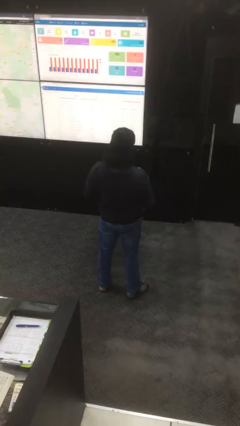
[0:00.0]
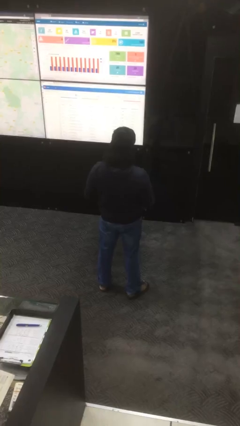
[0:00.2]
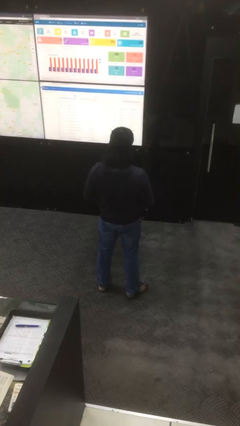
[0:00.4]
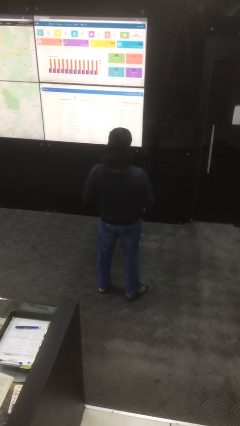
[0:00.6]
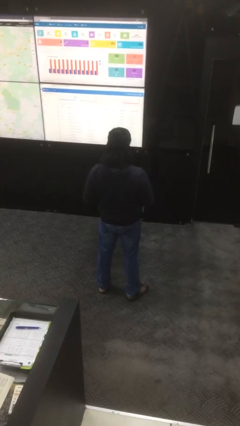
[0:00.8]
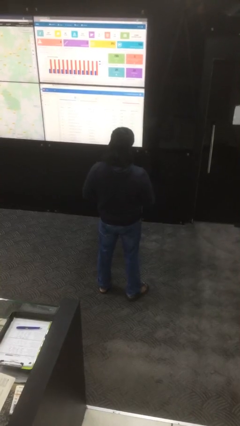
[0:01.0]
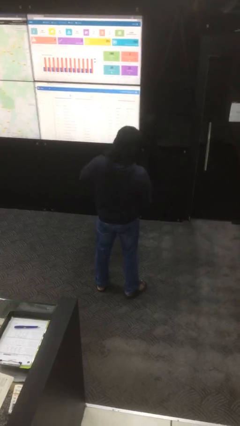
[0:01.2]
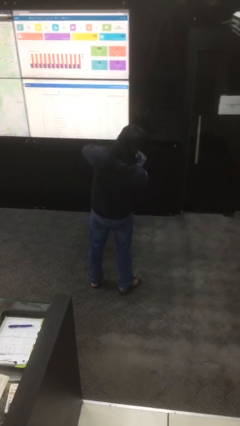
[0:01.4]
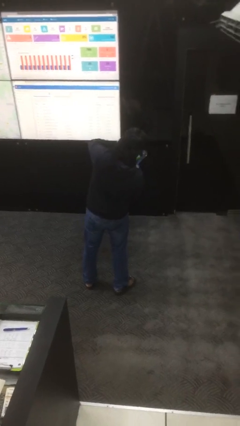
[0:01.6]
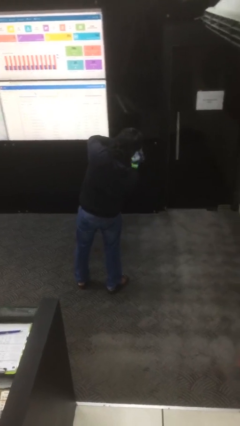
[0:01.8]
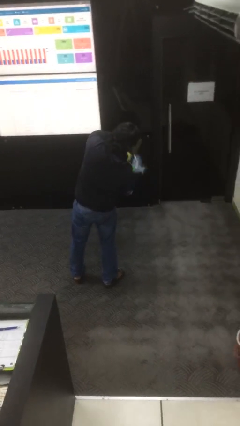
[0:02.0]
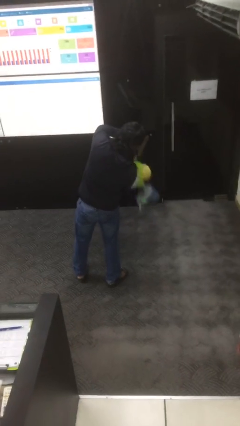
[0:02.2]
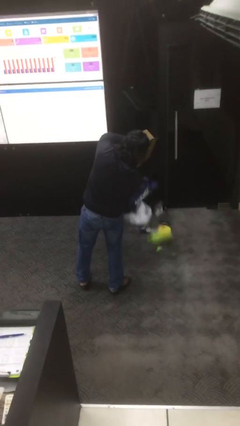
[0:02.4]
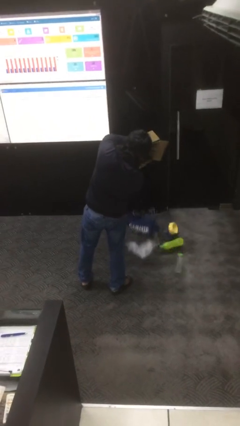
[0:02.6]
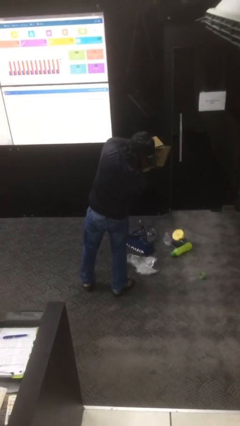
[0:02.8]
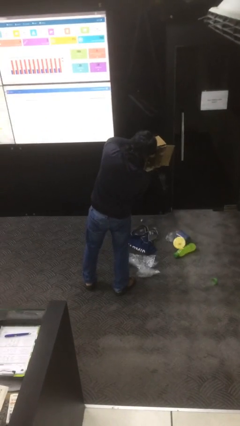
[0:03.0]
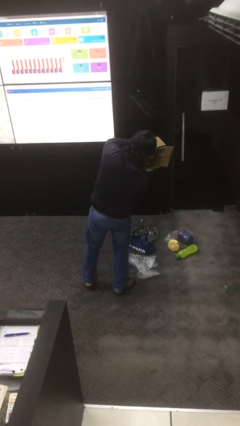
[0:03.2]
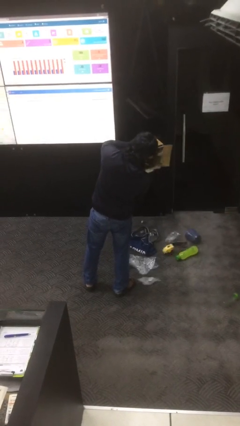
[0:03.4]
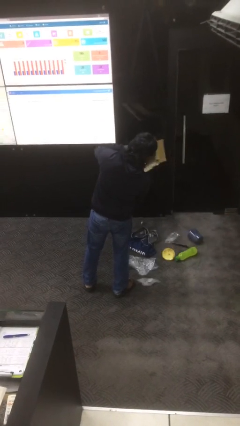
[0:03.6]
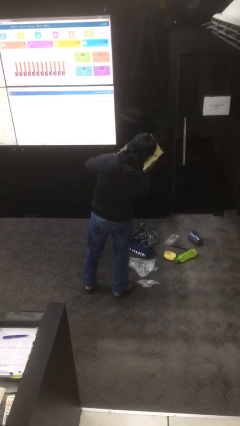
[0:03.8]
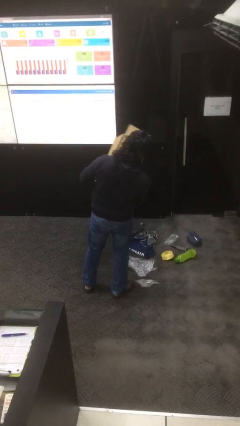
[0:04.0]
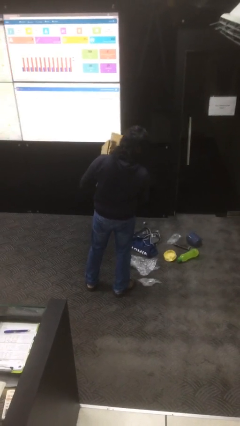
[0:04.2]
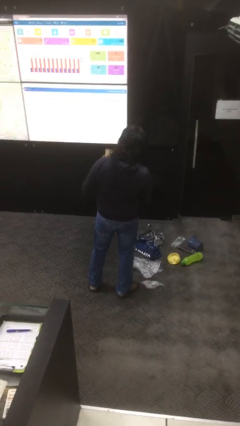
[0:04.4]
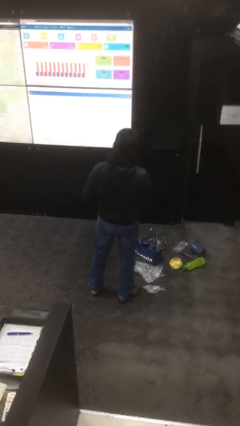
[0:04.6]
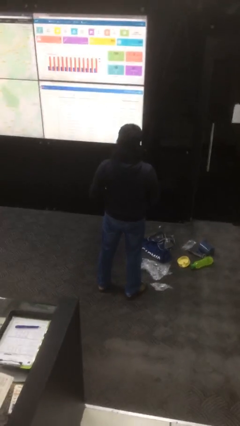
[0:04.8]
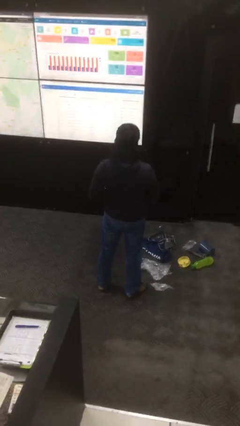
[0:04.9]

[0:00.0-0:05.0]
person unloads box onto floor

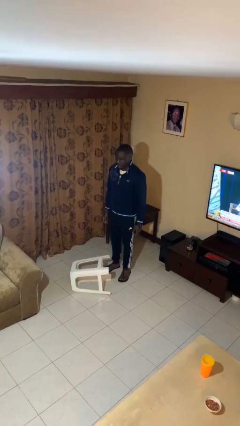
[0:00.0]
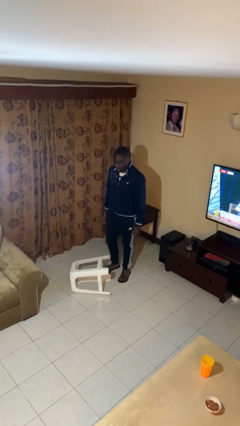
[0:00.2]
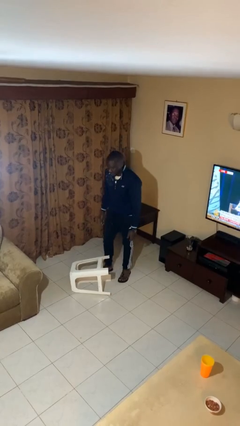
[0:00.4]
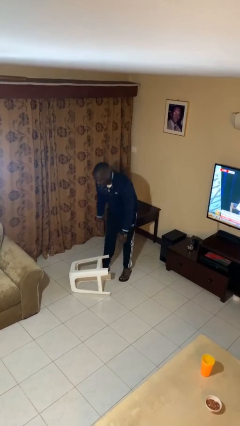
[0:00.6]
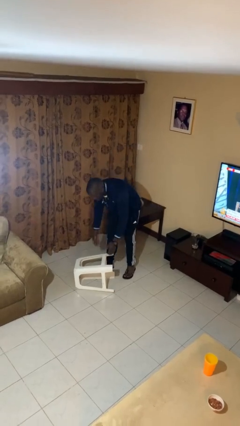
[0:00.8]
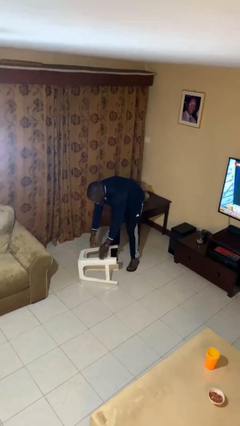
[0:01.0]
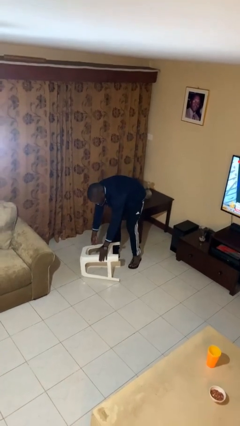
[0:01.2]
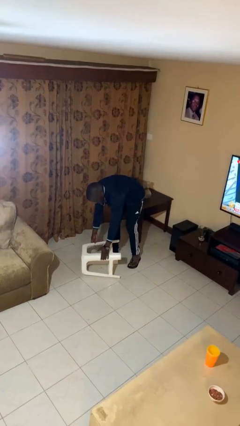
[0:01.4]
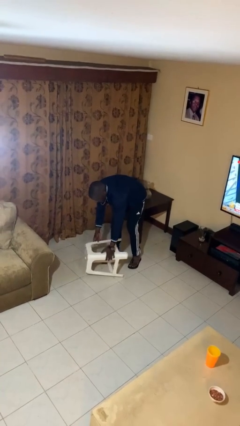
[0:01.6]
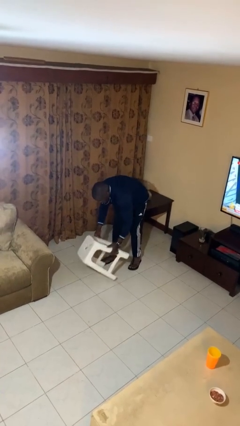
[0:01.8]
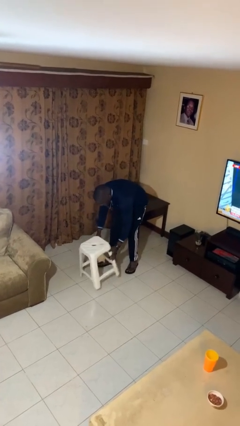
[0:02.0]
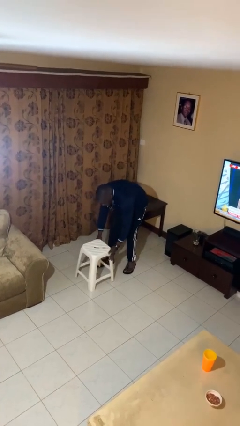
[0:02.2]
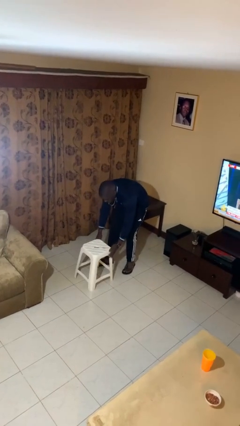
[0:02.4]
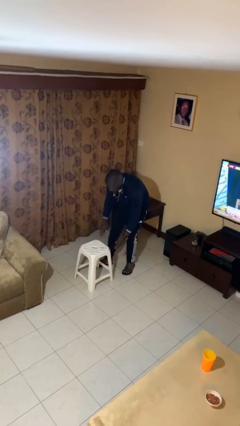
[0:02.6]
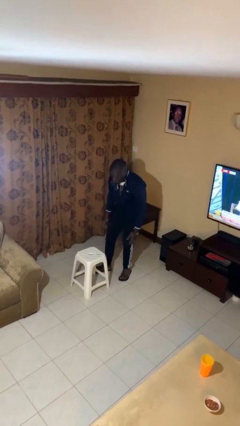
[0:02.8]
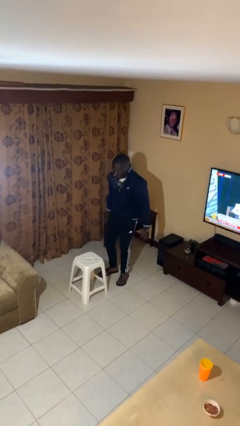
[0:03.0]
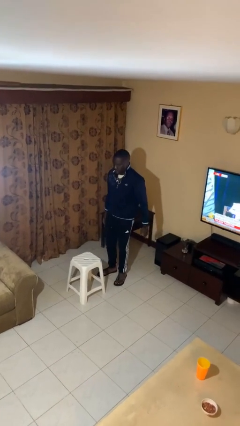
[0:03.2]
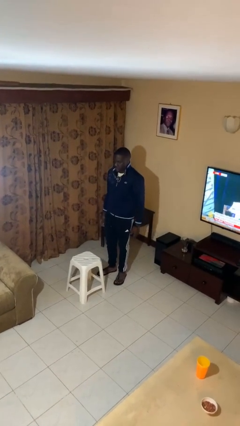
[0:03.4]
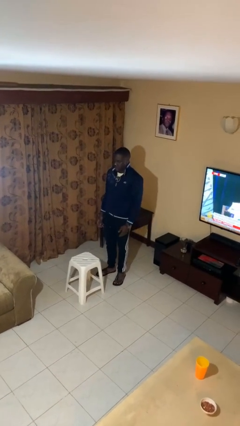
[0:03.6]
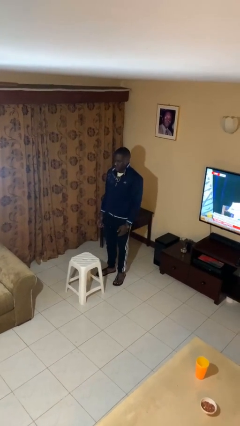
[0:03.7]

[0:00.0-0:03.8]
person sets upright furniture

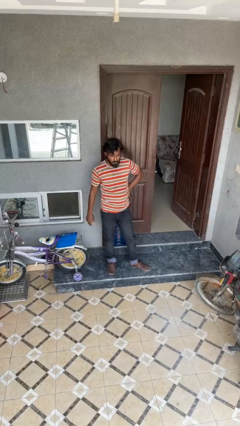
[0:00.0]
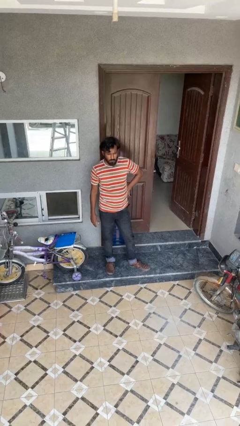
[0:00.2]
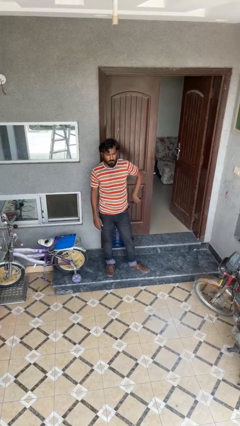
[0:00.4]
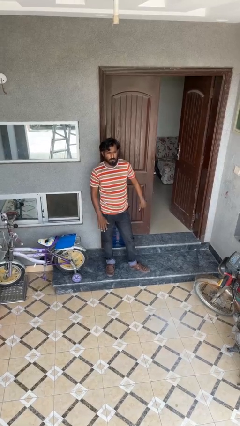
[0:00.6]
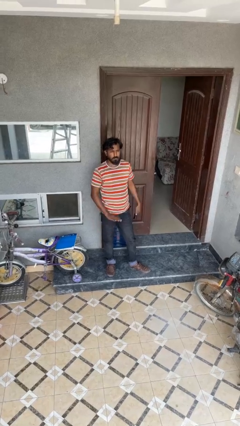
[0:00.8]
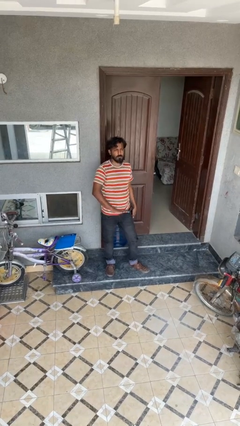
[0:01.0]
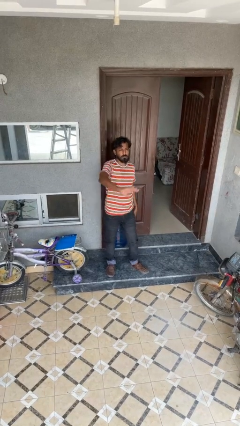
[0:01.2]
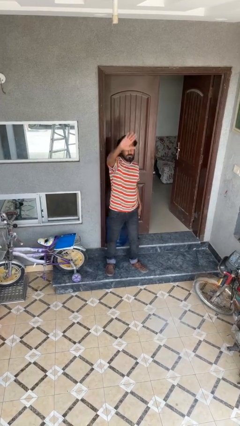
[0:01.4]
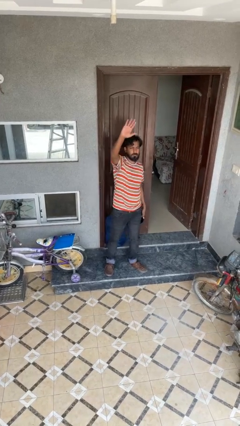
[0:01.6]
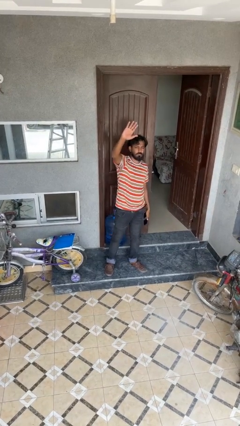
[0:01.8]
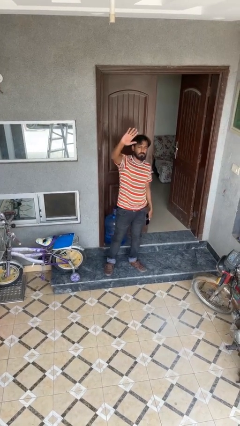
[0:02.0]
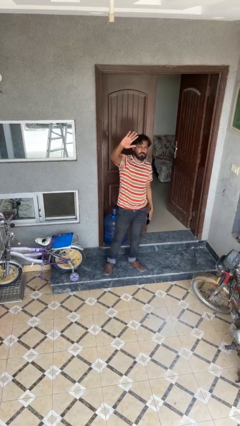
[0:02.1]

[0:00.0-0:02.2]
person gestures swipe up

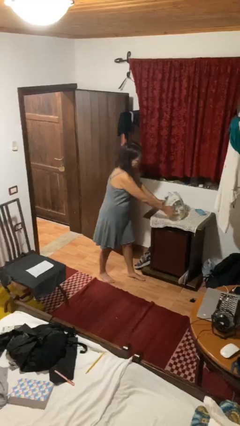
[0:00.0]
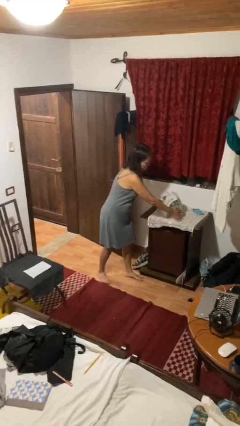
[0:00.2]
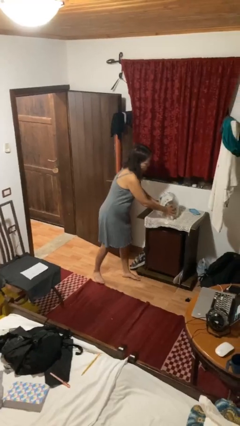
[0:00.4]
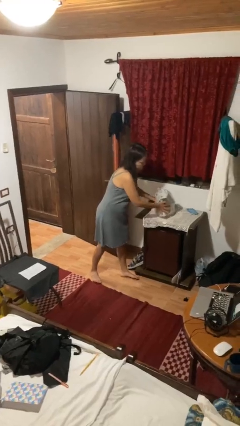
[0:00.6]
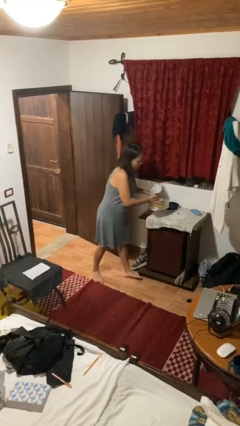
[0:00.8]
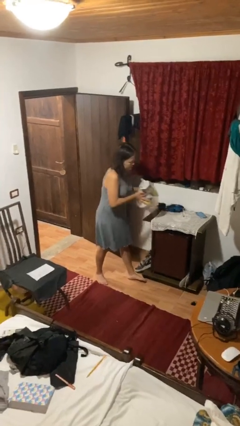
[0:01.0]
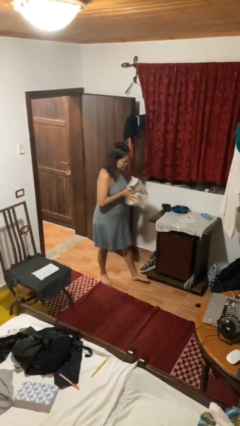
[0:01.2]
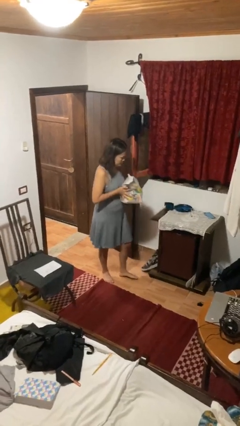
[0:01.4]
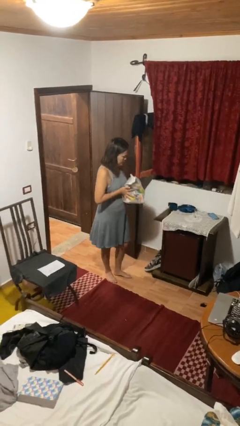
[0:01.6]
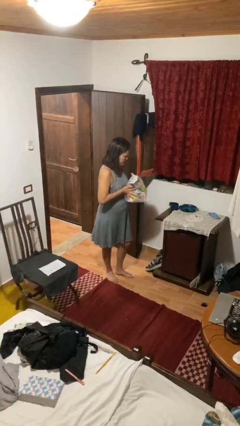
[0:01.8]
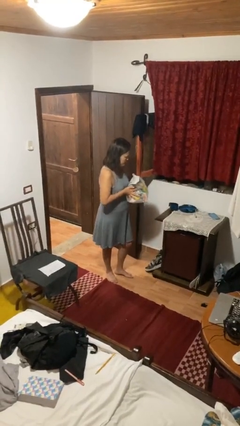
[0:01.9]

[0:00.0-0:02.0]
person picks up object from countertop

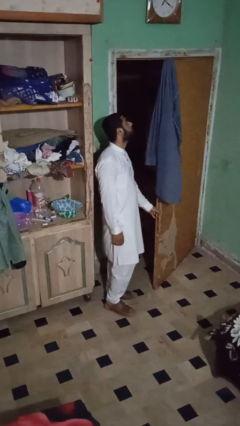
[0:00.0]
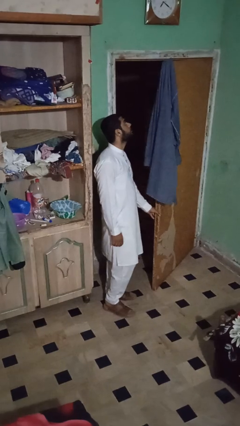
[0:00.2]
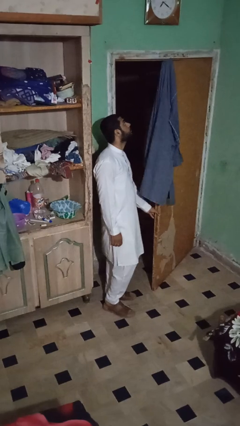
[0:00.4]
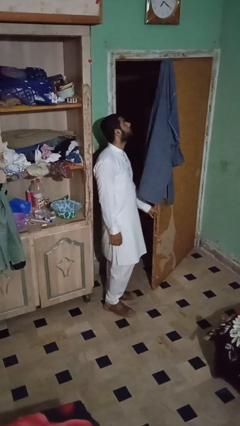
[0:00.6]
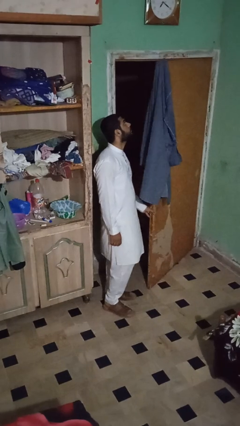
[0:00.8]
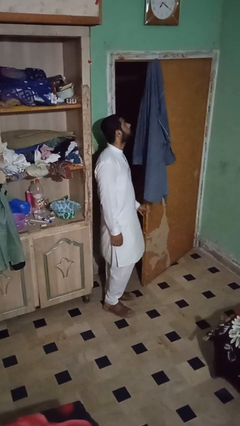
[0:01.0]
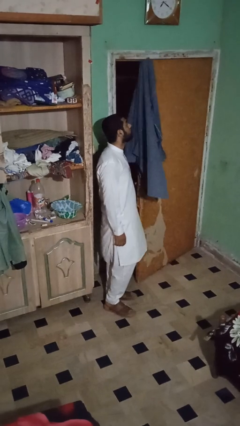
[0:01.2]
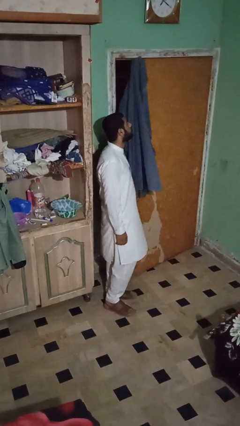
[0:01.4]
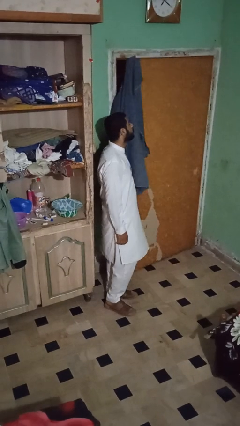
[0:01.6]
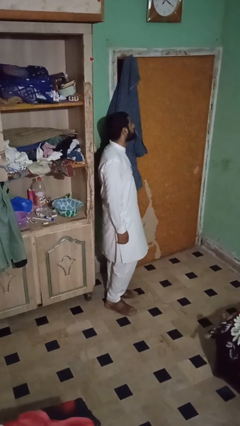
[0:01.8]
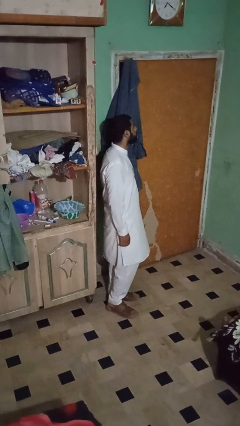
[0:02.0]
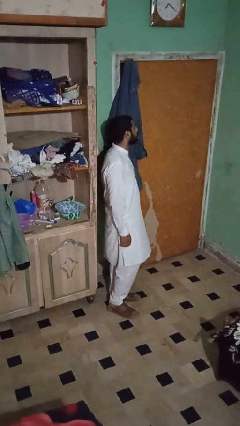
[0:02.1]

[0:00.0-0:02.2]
person closes closet door

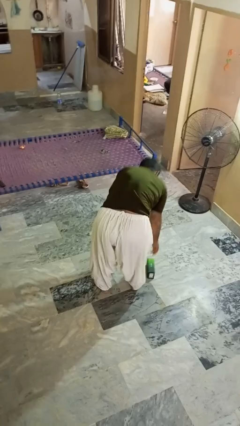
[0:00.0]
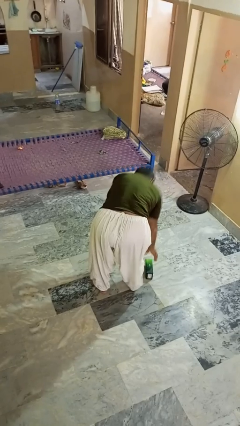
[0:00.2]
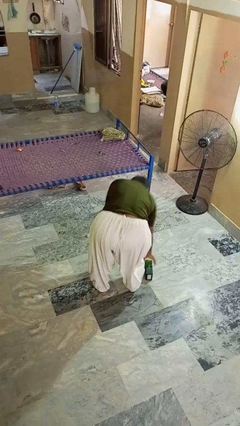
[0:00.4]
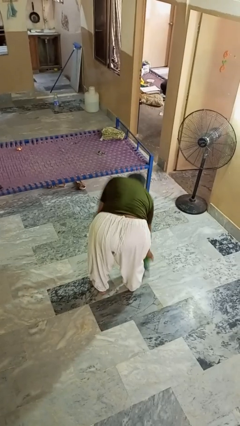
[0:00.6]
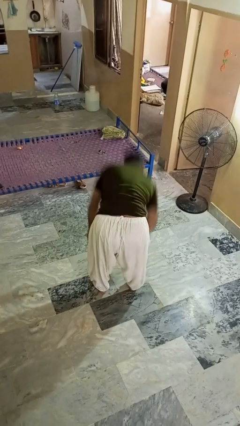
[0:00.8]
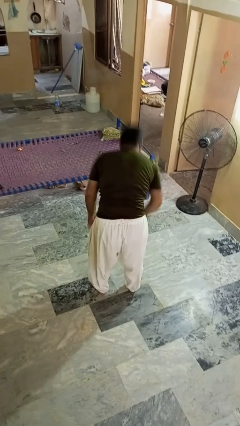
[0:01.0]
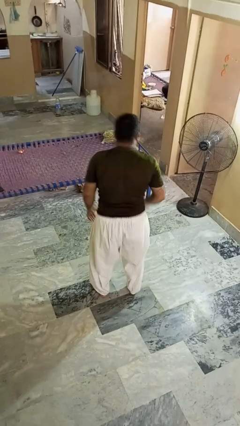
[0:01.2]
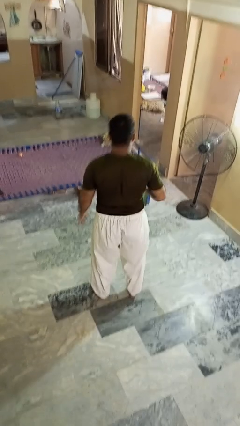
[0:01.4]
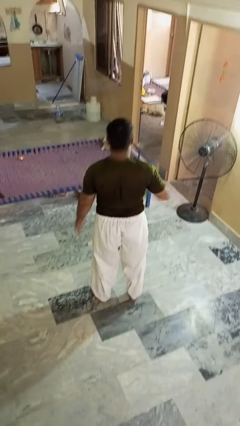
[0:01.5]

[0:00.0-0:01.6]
person picks up object from floor
